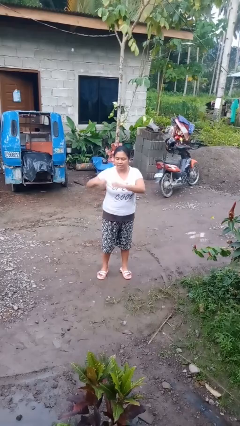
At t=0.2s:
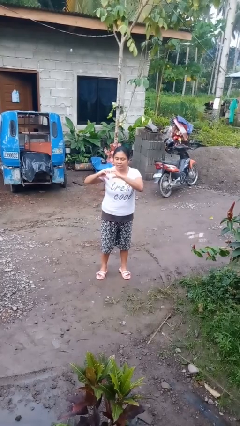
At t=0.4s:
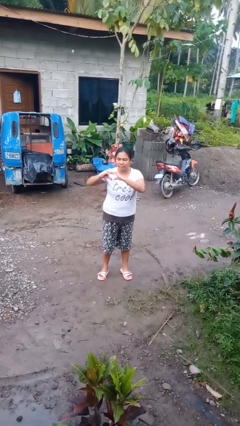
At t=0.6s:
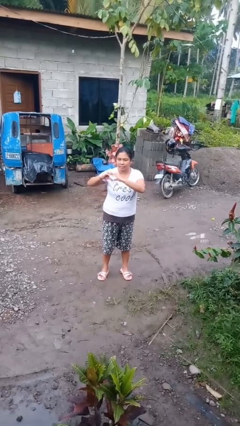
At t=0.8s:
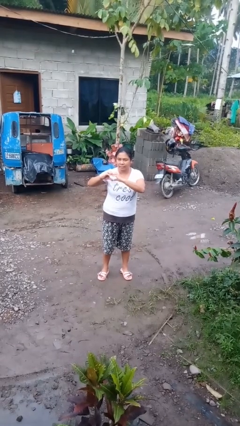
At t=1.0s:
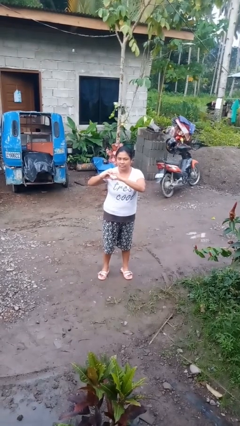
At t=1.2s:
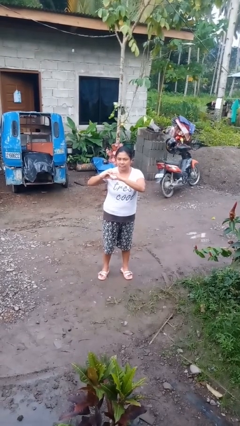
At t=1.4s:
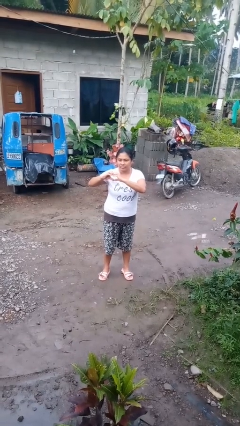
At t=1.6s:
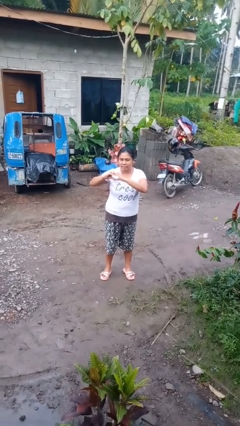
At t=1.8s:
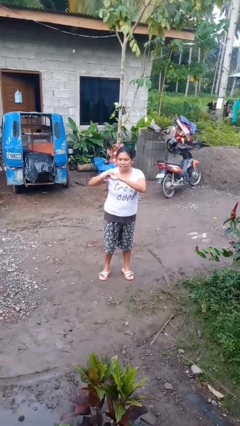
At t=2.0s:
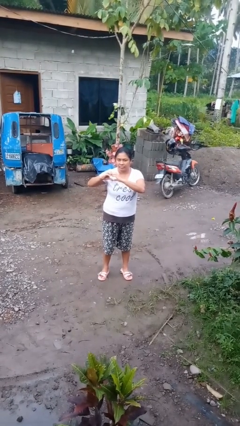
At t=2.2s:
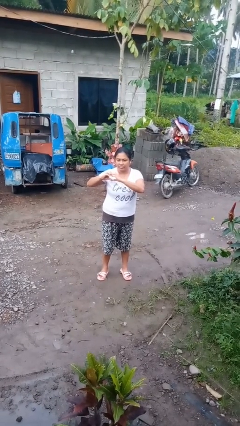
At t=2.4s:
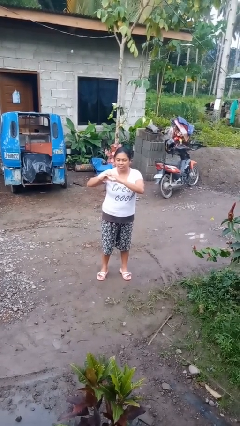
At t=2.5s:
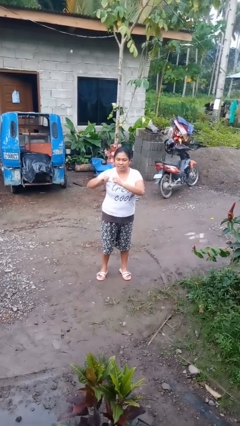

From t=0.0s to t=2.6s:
person gestures heart

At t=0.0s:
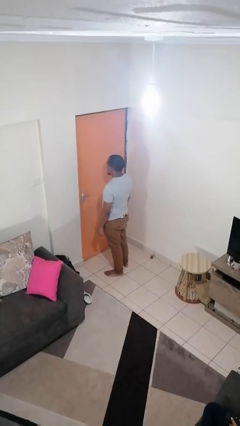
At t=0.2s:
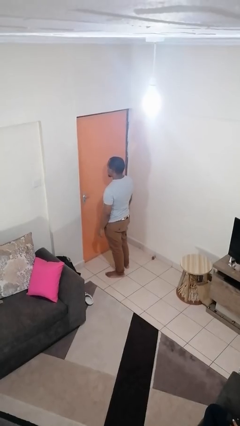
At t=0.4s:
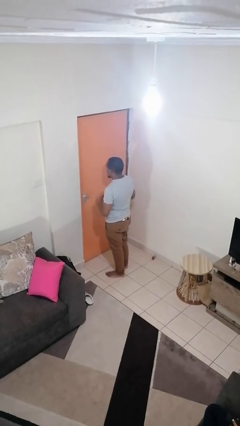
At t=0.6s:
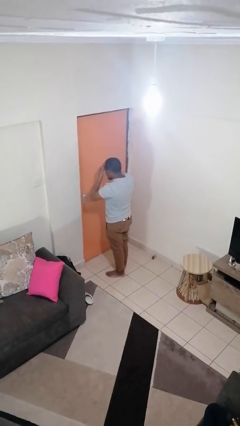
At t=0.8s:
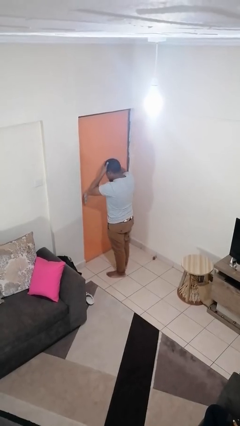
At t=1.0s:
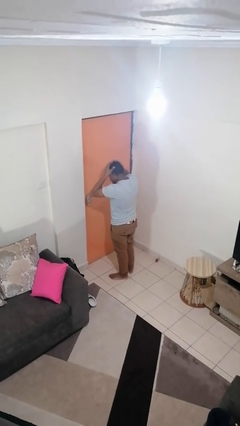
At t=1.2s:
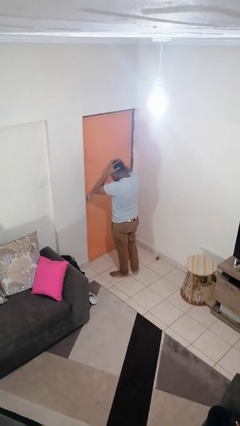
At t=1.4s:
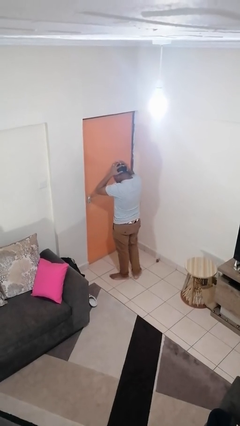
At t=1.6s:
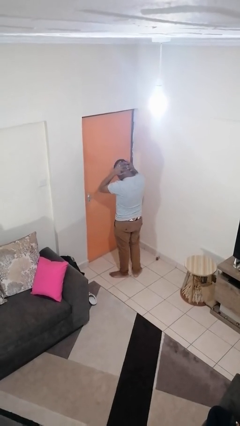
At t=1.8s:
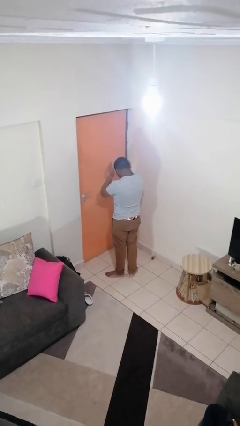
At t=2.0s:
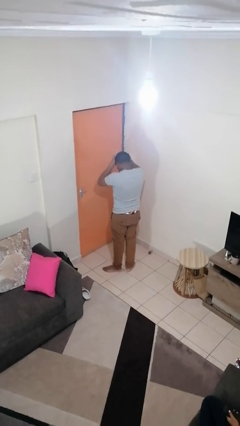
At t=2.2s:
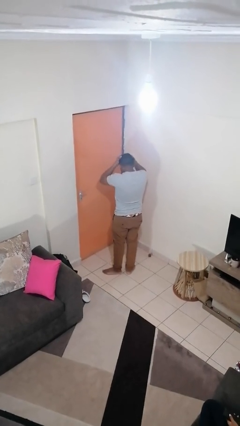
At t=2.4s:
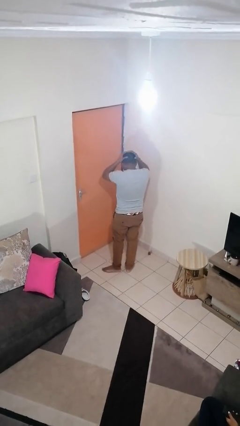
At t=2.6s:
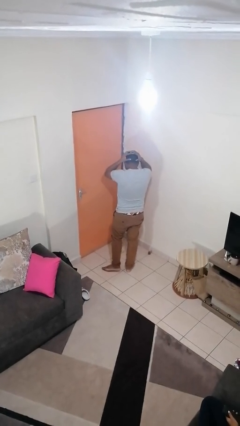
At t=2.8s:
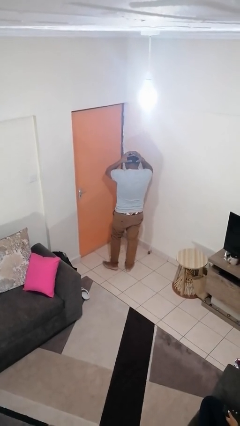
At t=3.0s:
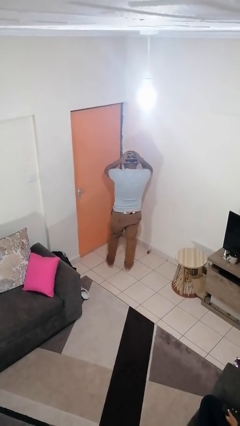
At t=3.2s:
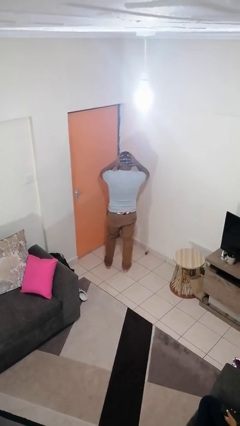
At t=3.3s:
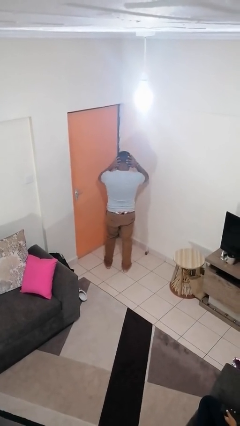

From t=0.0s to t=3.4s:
person strokes hair

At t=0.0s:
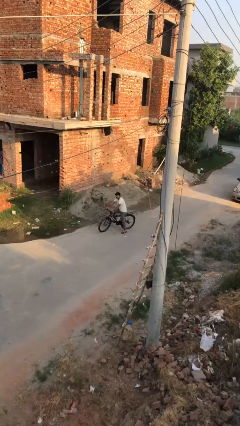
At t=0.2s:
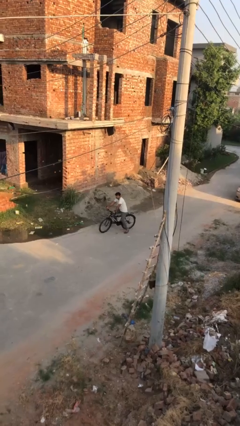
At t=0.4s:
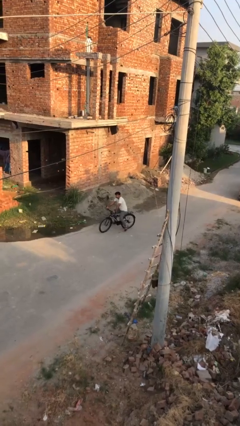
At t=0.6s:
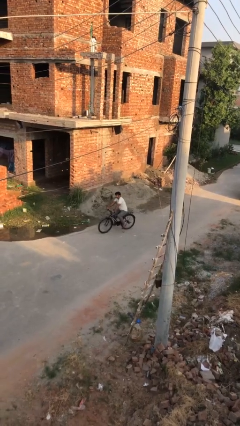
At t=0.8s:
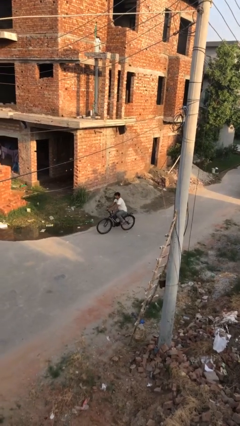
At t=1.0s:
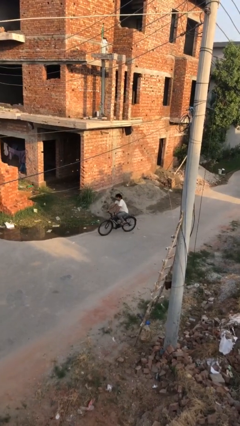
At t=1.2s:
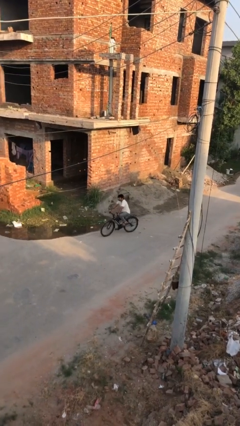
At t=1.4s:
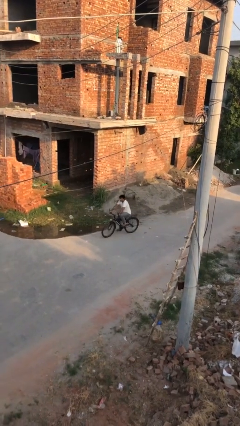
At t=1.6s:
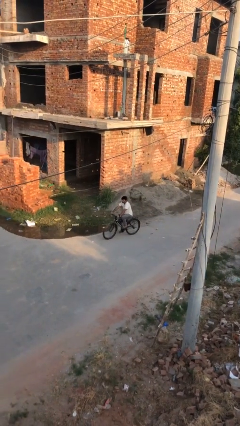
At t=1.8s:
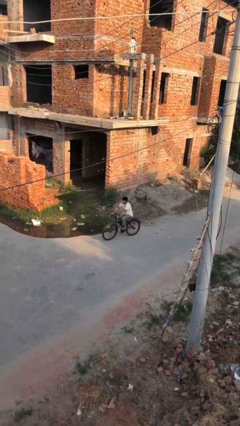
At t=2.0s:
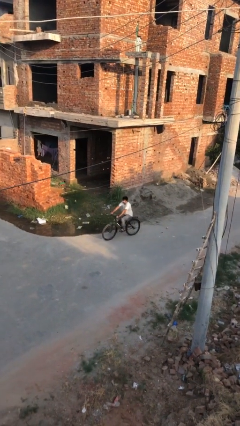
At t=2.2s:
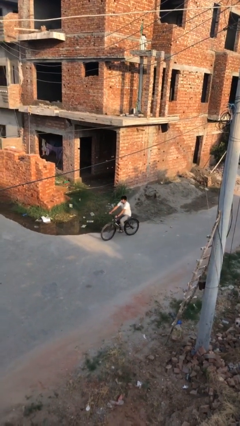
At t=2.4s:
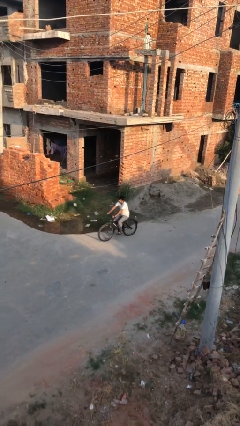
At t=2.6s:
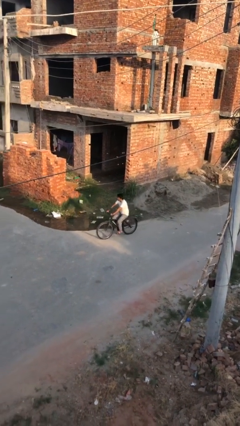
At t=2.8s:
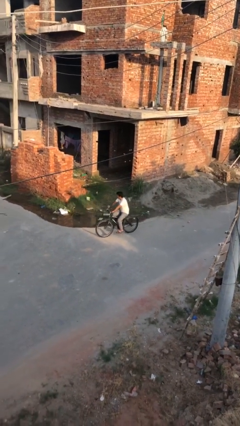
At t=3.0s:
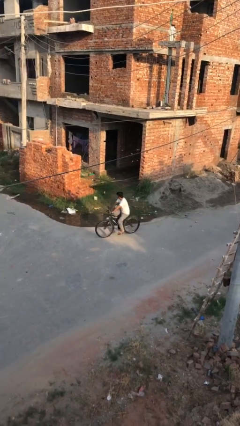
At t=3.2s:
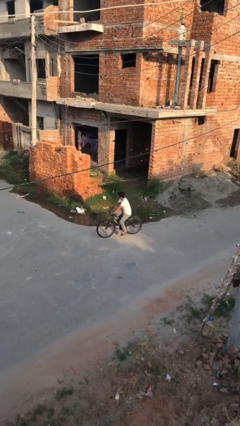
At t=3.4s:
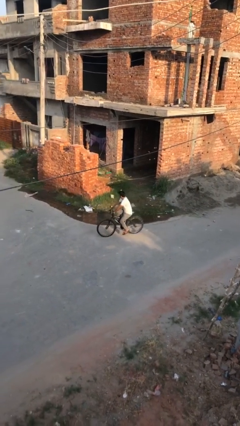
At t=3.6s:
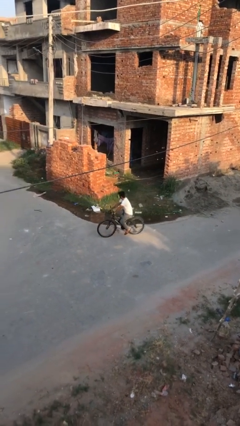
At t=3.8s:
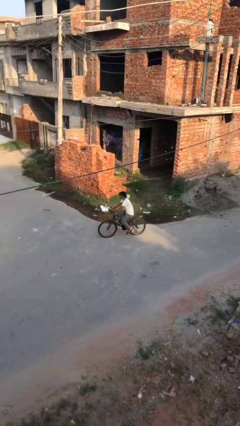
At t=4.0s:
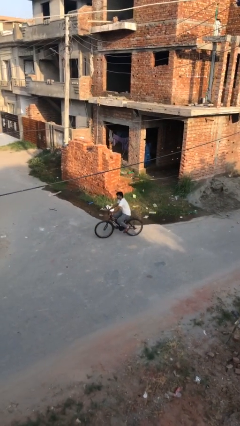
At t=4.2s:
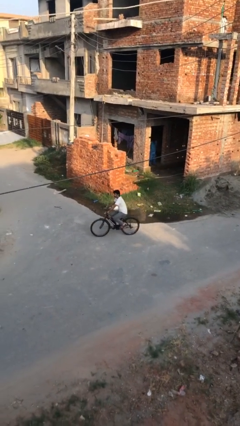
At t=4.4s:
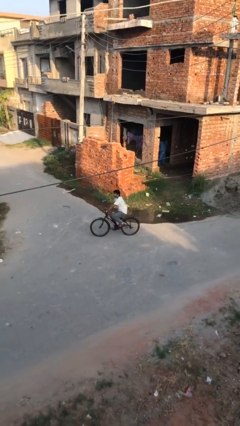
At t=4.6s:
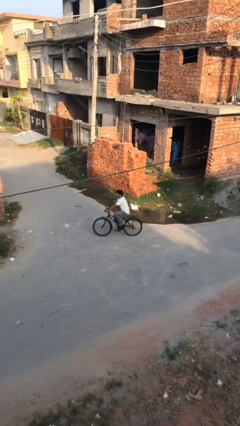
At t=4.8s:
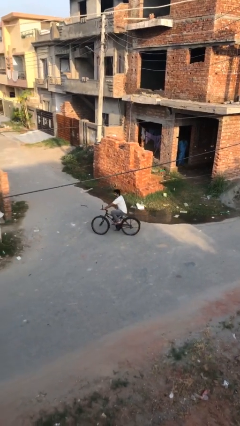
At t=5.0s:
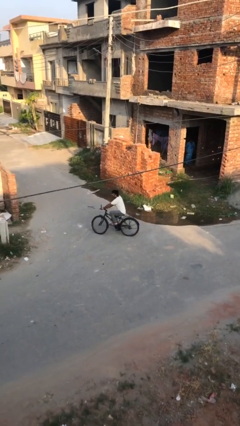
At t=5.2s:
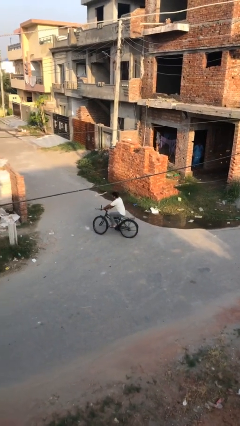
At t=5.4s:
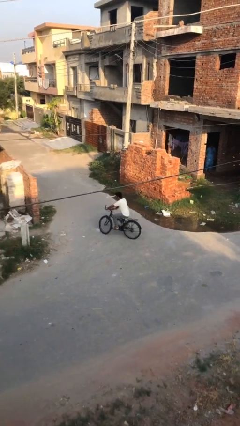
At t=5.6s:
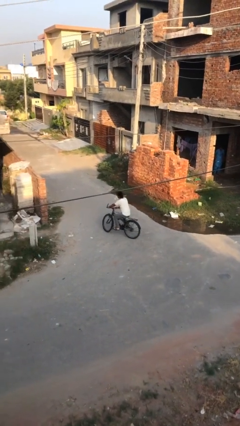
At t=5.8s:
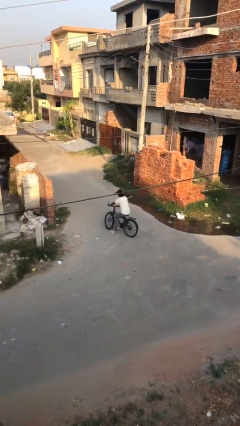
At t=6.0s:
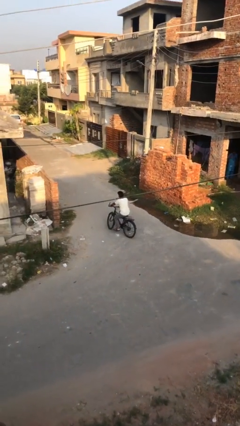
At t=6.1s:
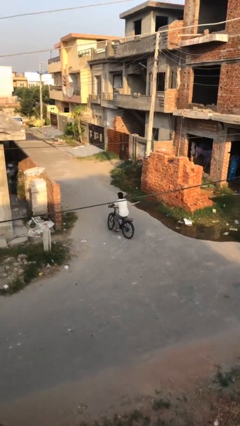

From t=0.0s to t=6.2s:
person rides bicycle

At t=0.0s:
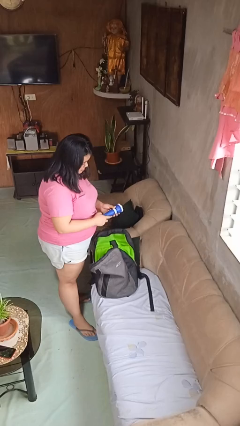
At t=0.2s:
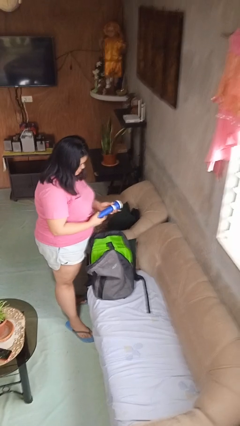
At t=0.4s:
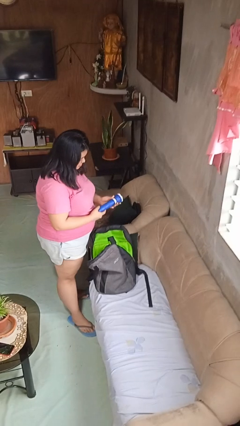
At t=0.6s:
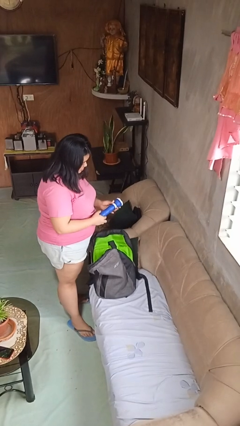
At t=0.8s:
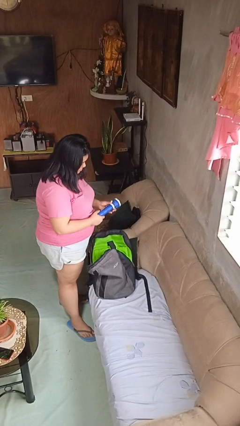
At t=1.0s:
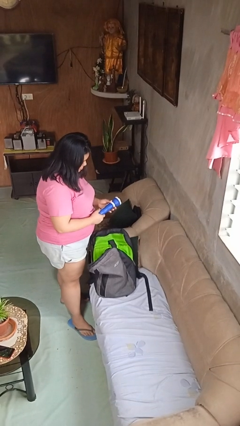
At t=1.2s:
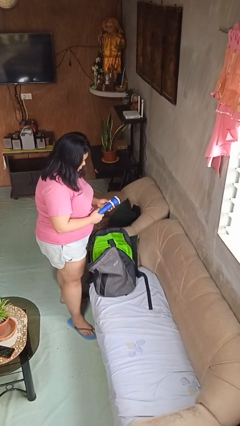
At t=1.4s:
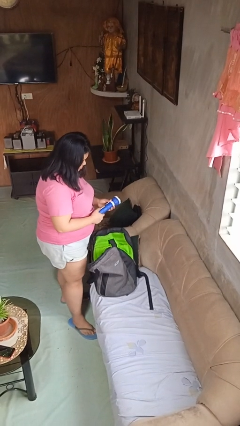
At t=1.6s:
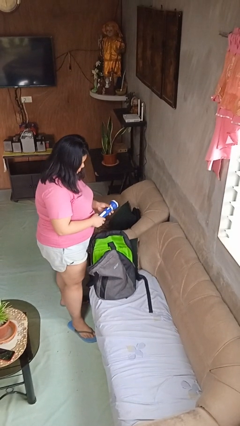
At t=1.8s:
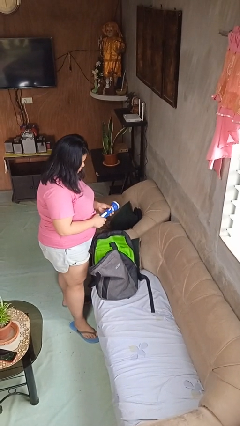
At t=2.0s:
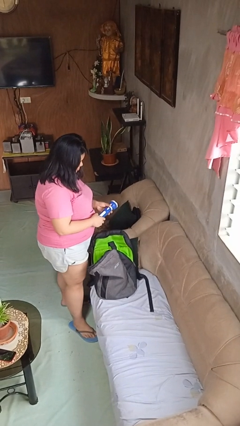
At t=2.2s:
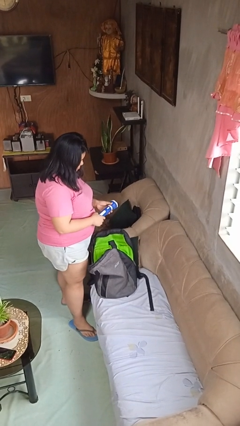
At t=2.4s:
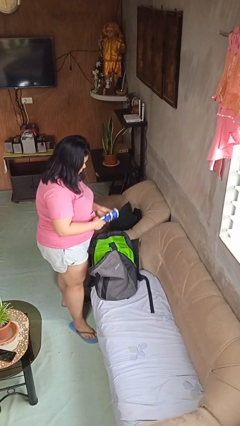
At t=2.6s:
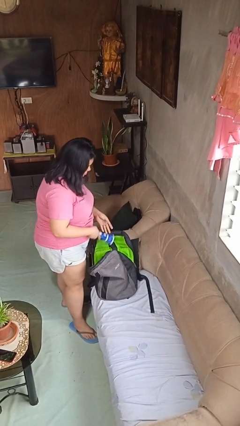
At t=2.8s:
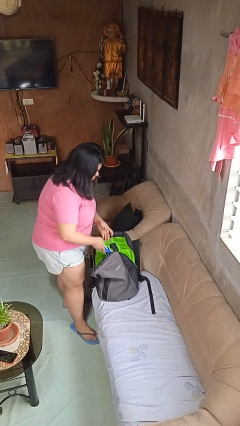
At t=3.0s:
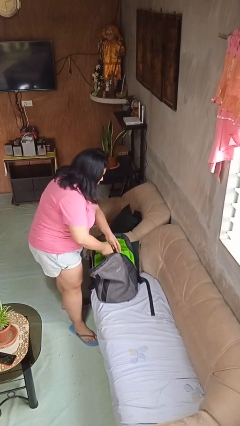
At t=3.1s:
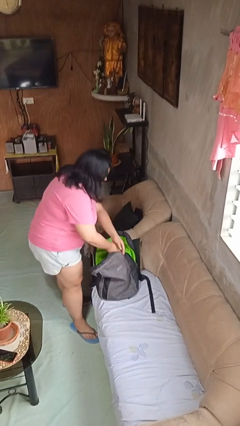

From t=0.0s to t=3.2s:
person takes object from backpack

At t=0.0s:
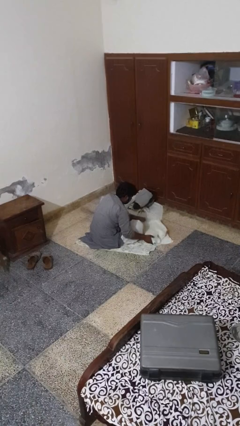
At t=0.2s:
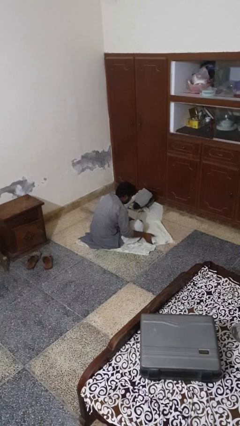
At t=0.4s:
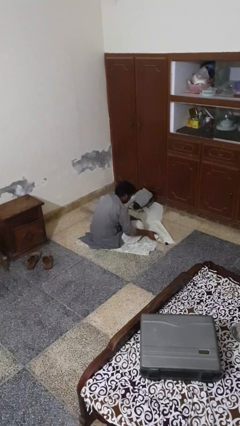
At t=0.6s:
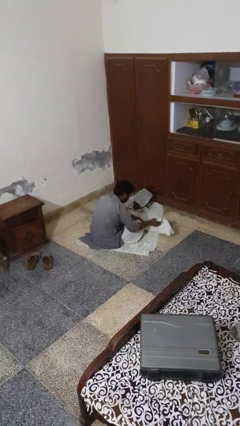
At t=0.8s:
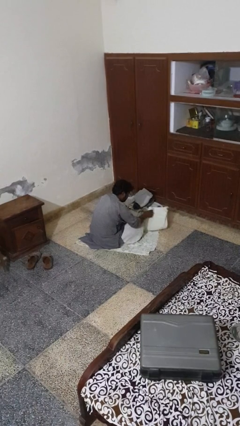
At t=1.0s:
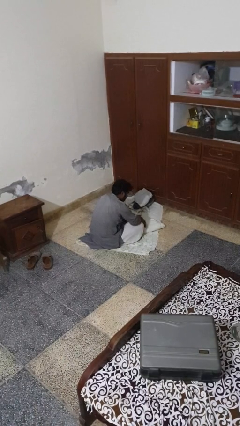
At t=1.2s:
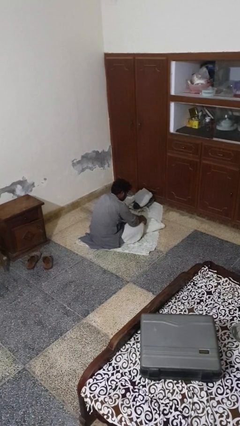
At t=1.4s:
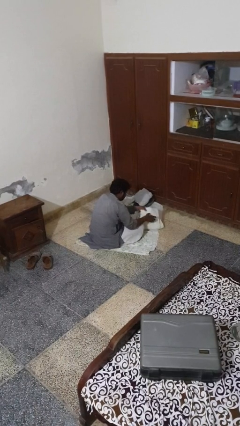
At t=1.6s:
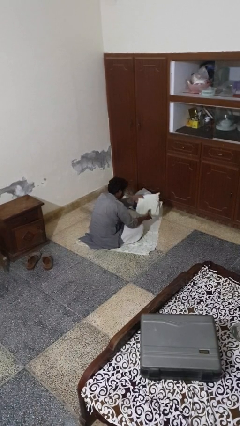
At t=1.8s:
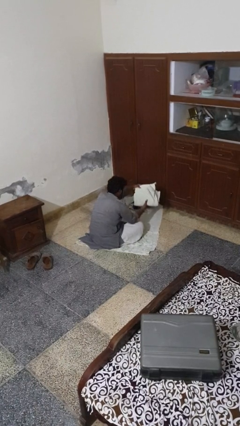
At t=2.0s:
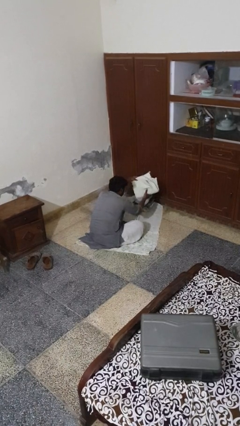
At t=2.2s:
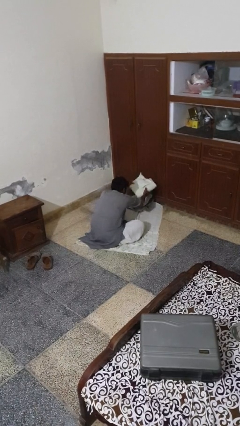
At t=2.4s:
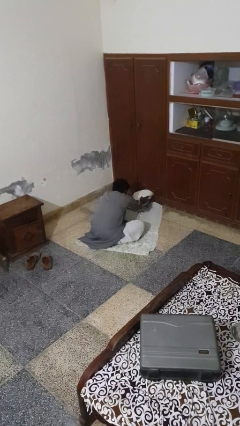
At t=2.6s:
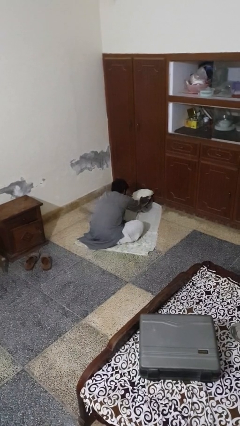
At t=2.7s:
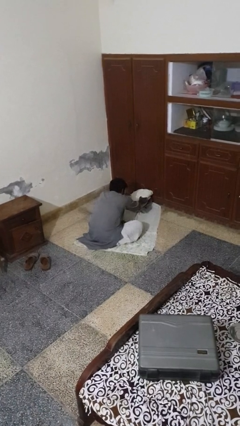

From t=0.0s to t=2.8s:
person folds towel
